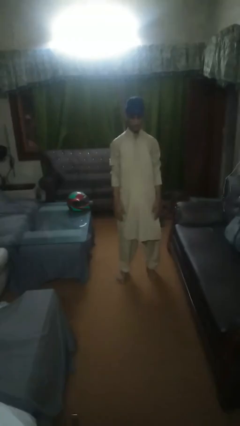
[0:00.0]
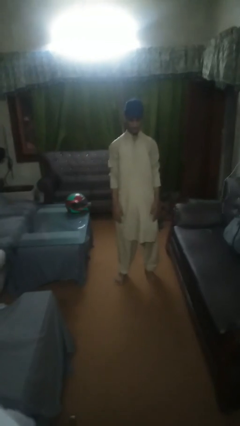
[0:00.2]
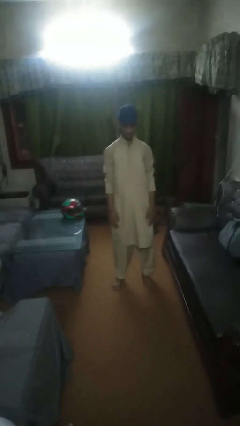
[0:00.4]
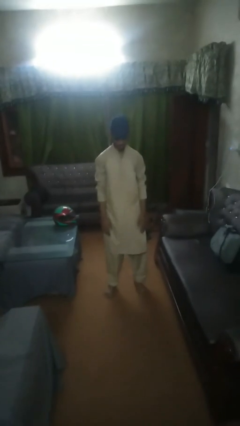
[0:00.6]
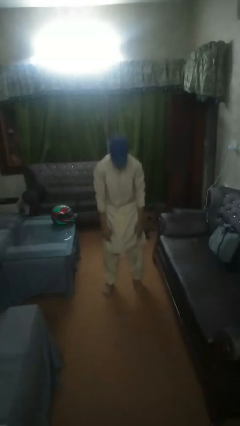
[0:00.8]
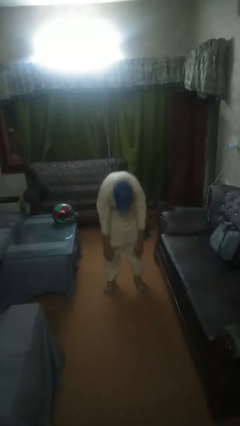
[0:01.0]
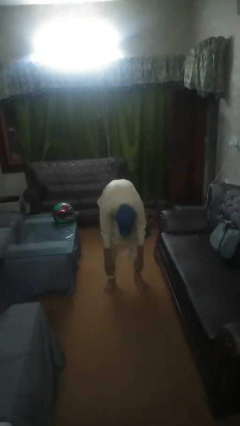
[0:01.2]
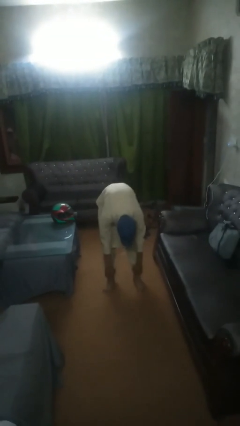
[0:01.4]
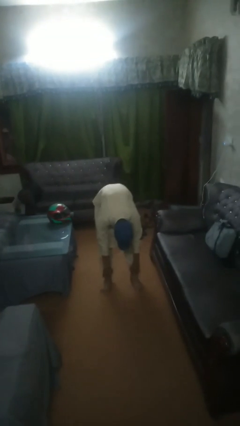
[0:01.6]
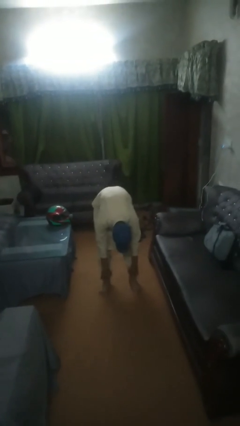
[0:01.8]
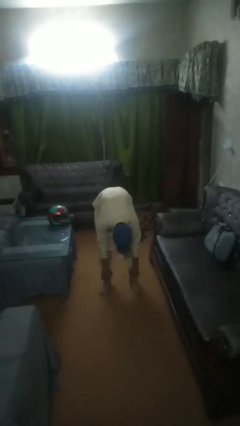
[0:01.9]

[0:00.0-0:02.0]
person exercises with plank

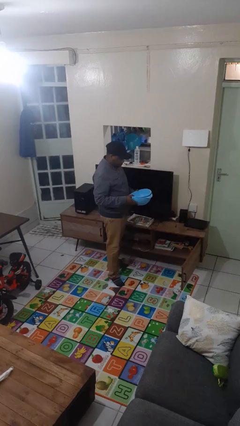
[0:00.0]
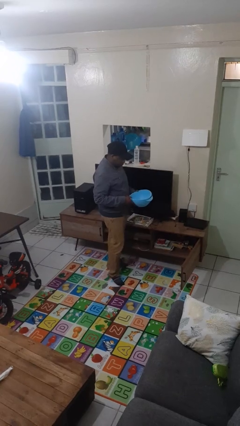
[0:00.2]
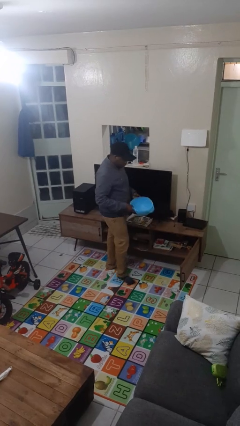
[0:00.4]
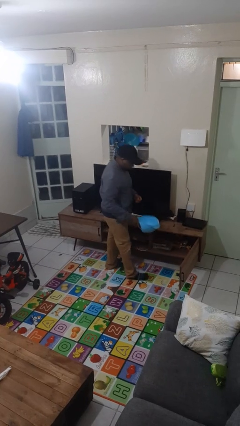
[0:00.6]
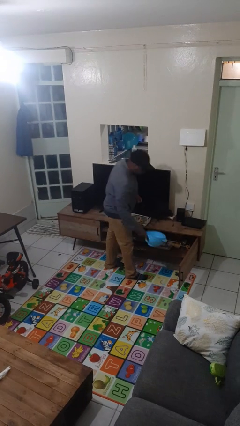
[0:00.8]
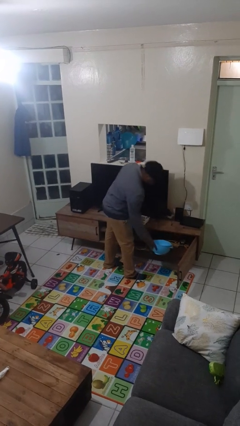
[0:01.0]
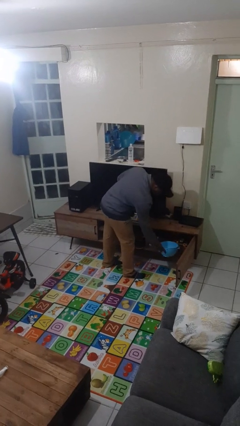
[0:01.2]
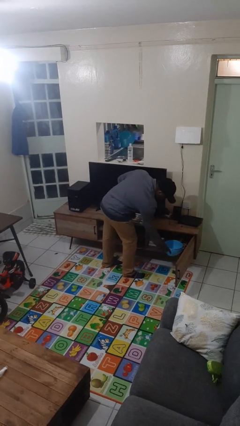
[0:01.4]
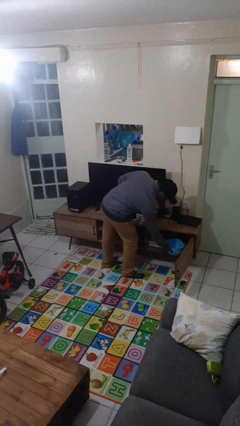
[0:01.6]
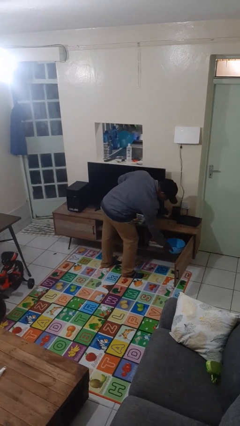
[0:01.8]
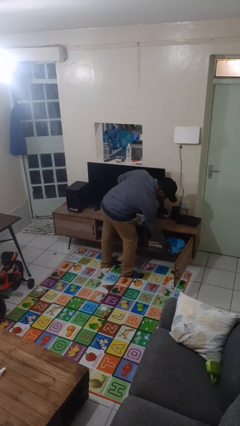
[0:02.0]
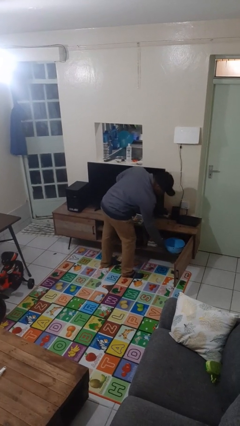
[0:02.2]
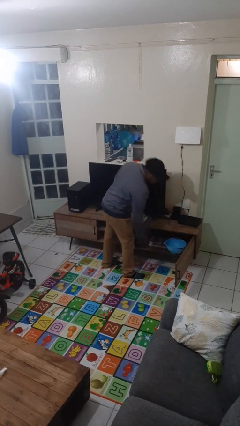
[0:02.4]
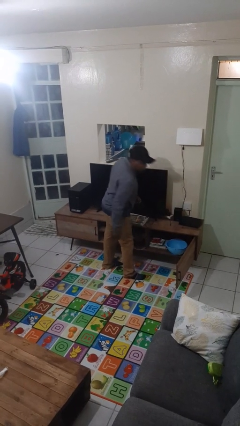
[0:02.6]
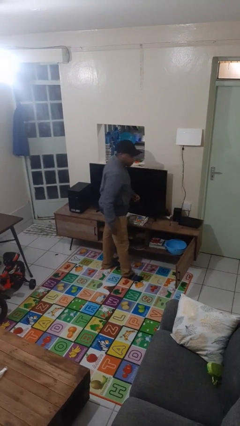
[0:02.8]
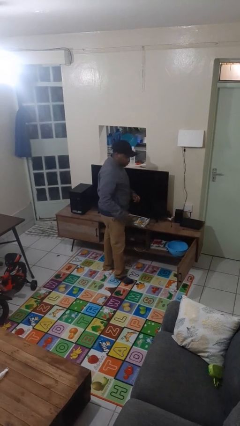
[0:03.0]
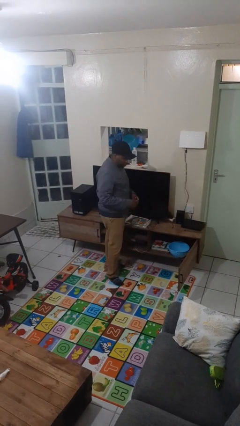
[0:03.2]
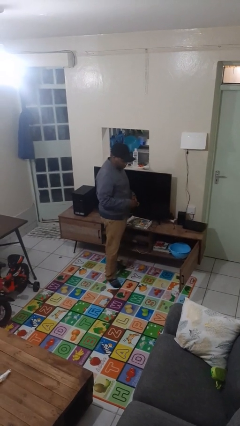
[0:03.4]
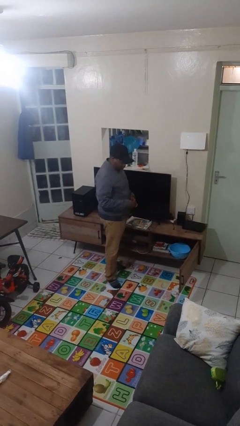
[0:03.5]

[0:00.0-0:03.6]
person puts down object into cabinet

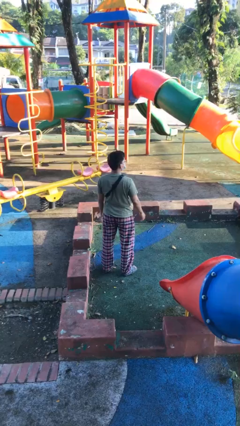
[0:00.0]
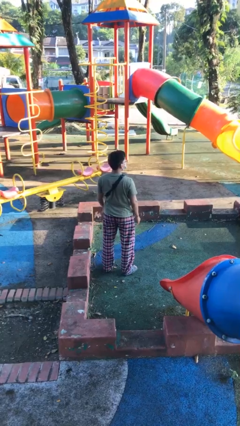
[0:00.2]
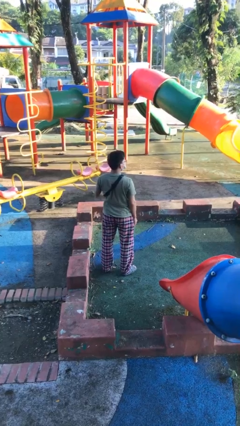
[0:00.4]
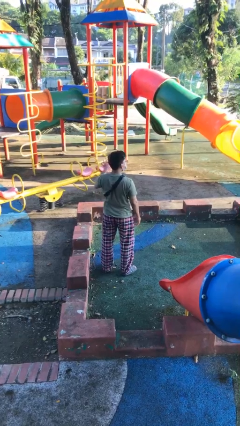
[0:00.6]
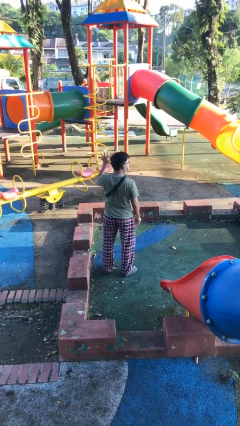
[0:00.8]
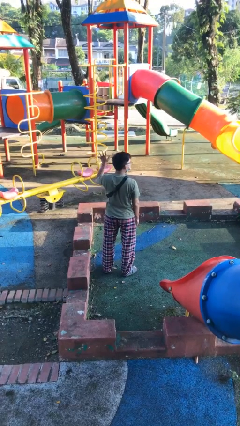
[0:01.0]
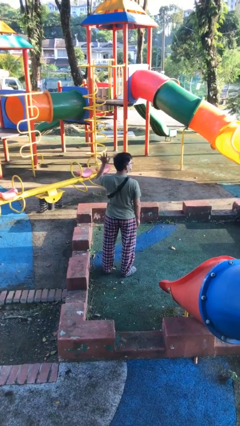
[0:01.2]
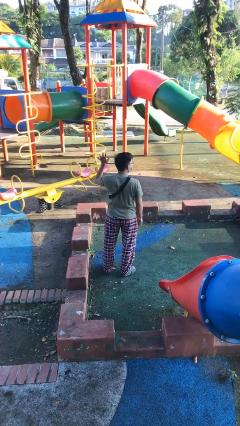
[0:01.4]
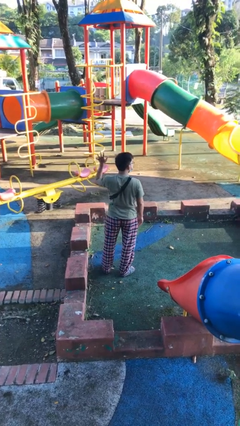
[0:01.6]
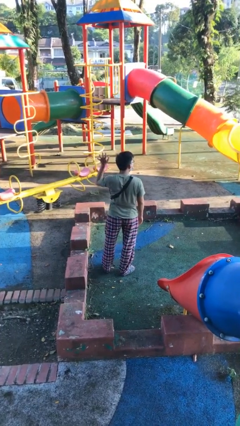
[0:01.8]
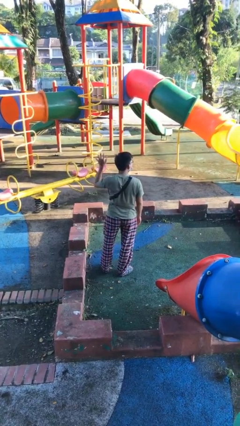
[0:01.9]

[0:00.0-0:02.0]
person gestures number five

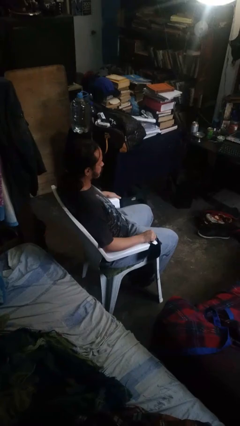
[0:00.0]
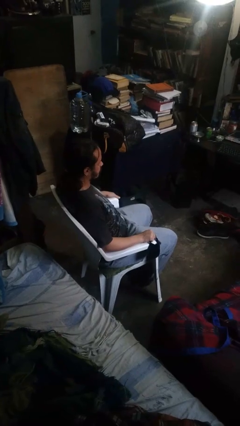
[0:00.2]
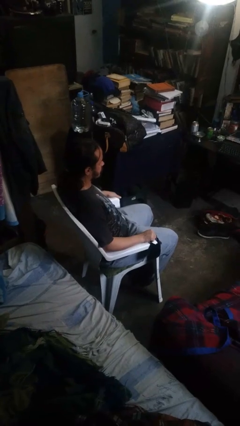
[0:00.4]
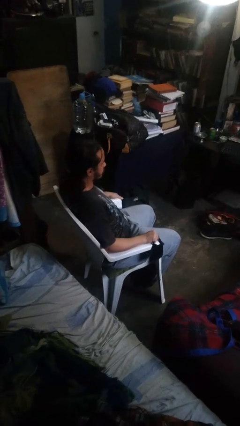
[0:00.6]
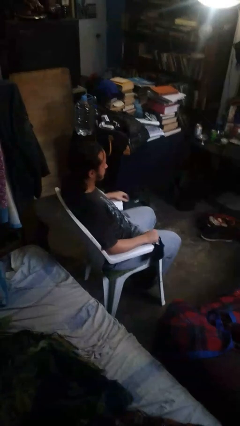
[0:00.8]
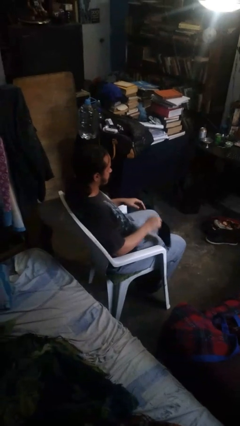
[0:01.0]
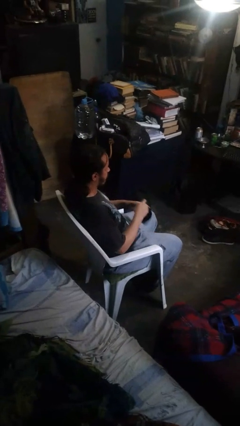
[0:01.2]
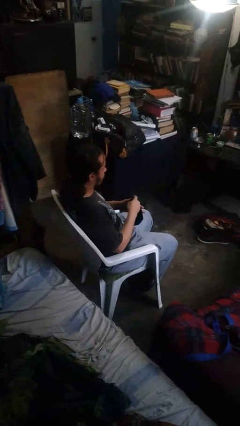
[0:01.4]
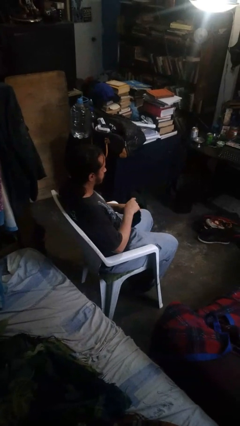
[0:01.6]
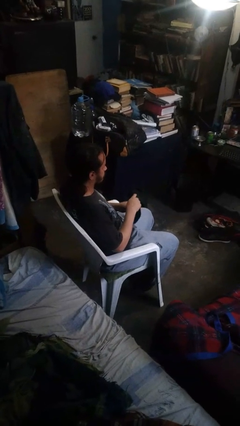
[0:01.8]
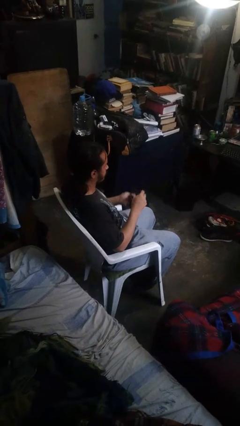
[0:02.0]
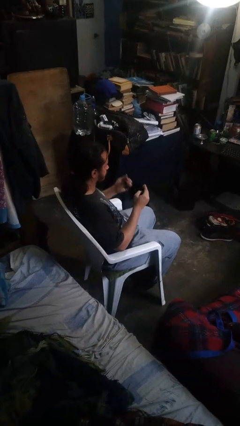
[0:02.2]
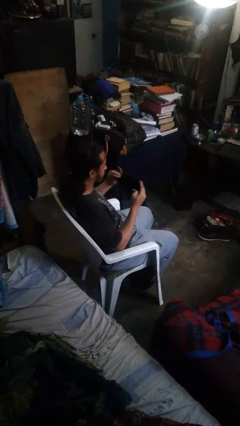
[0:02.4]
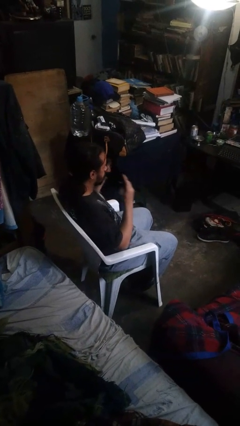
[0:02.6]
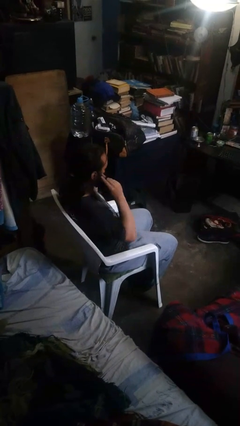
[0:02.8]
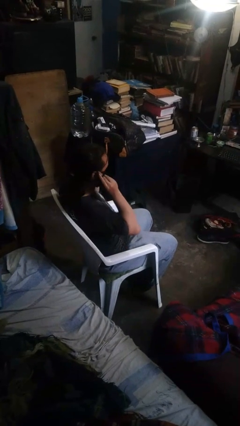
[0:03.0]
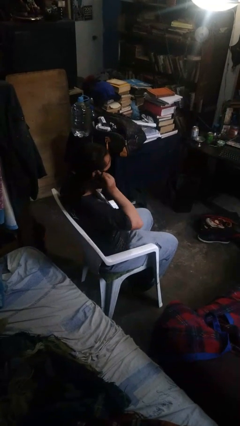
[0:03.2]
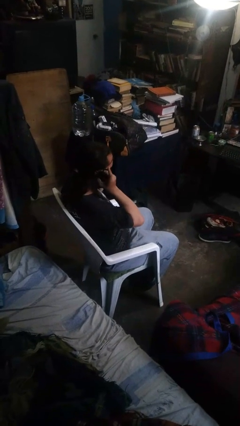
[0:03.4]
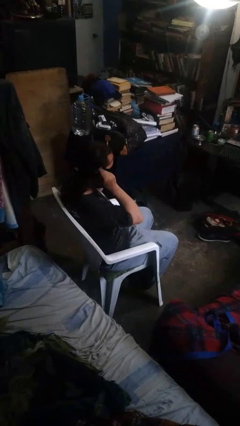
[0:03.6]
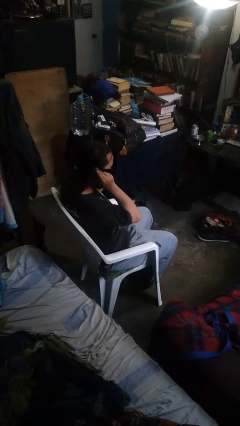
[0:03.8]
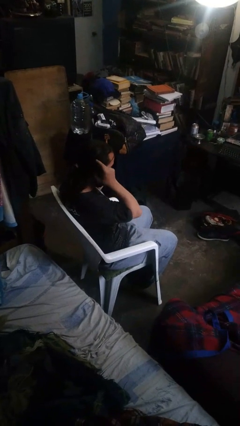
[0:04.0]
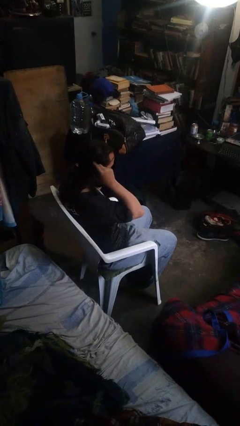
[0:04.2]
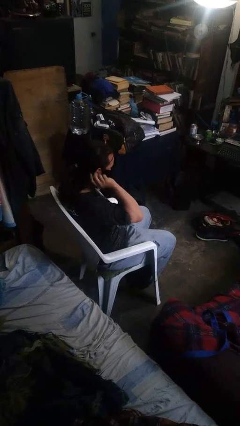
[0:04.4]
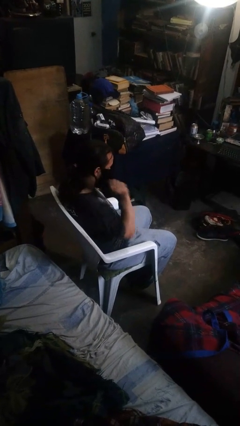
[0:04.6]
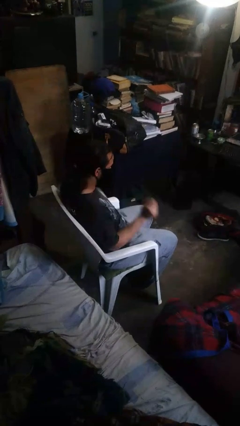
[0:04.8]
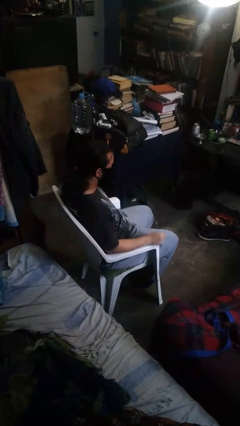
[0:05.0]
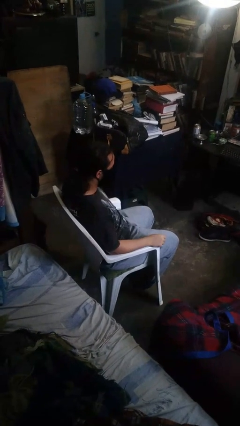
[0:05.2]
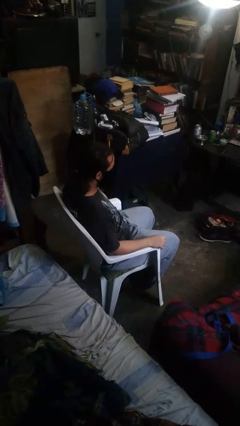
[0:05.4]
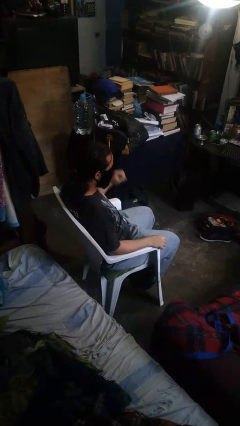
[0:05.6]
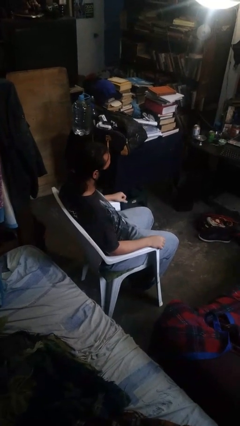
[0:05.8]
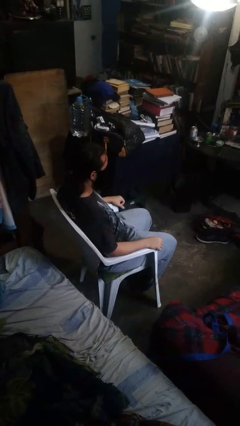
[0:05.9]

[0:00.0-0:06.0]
person puts on facemask

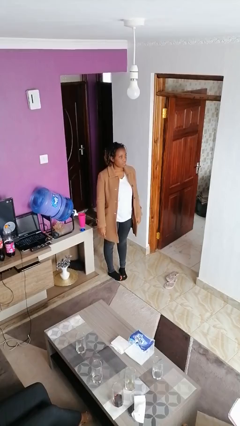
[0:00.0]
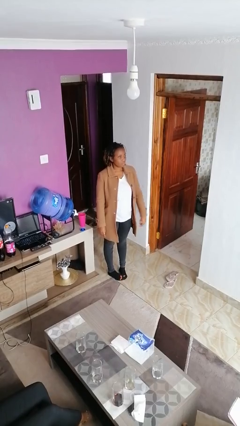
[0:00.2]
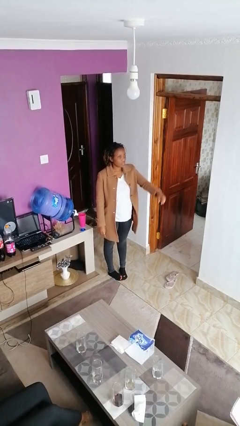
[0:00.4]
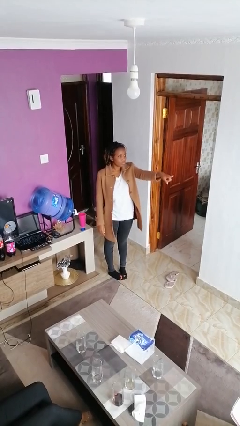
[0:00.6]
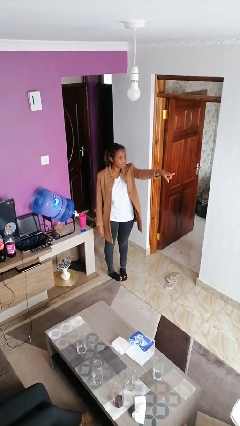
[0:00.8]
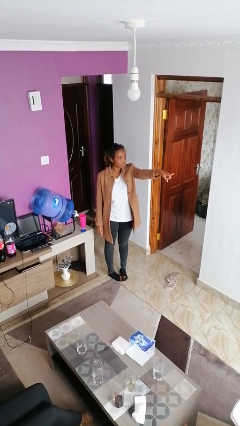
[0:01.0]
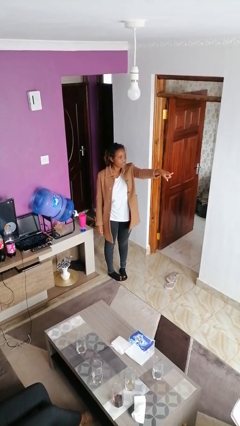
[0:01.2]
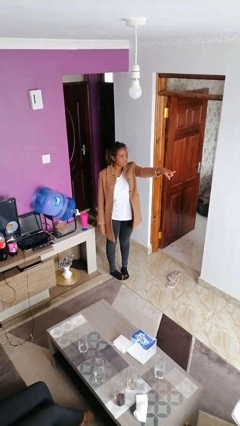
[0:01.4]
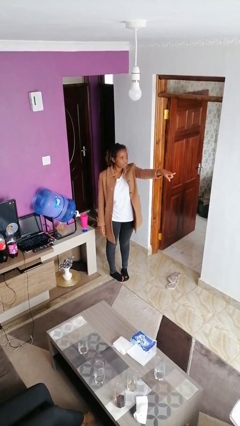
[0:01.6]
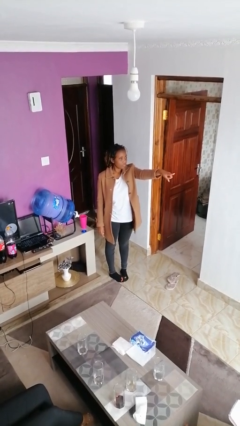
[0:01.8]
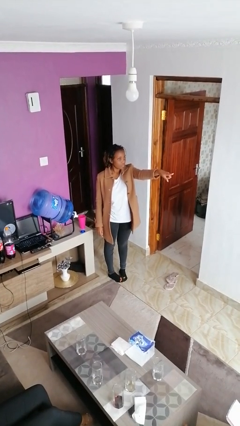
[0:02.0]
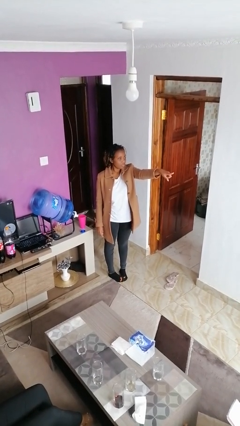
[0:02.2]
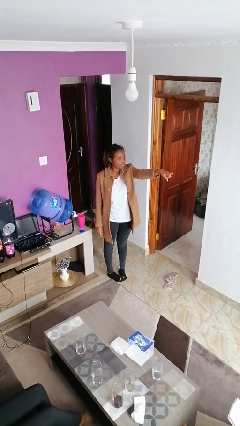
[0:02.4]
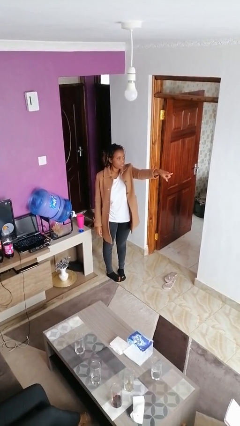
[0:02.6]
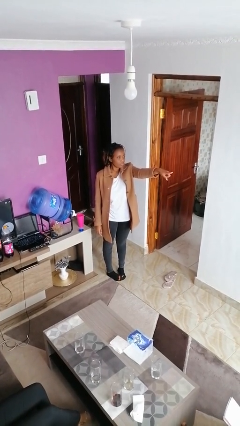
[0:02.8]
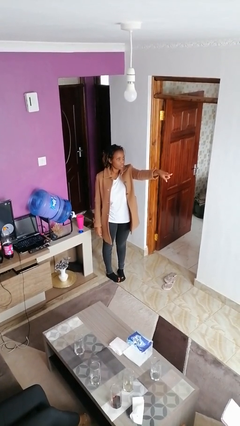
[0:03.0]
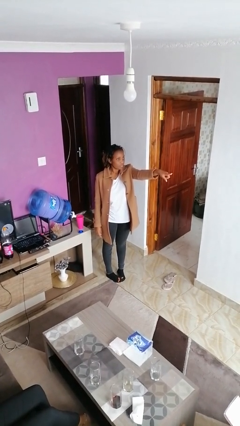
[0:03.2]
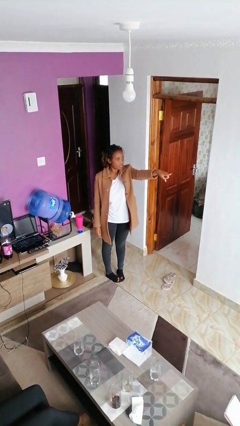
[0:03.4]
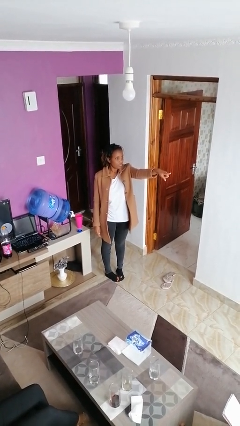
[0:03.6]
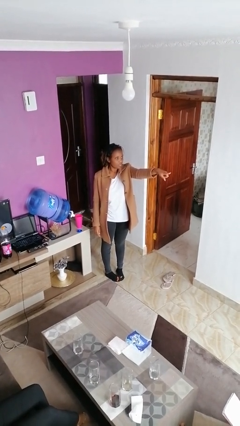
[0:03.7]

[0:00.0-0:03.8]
person points at person
